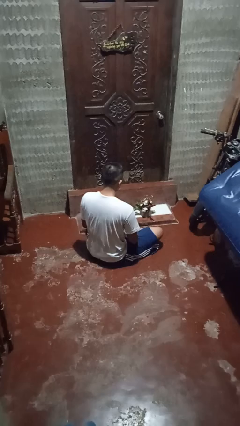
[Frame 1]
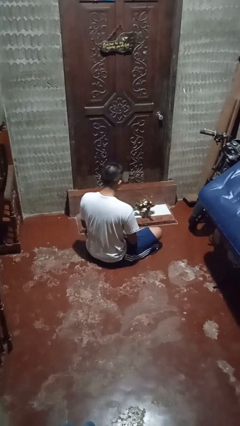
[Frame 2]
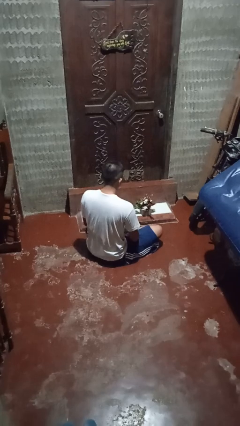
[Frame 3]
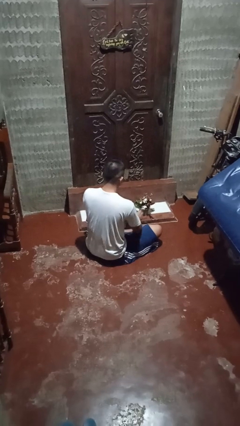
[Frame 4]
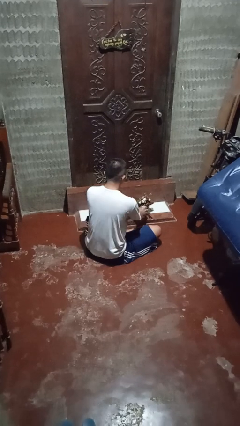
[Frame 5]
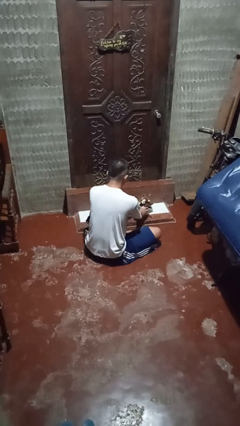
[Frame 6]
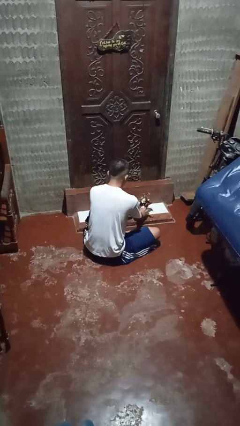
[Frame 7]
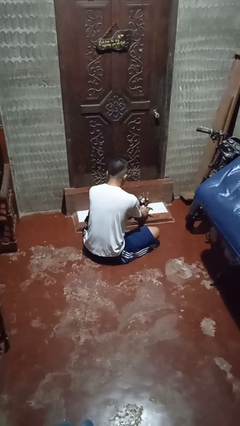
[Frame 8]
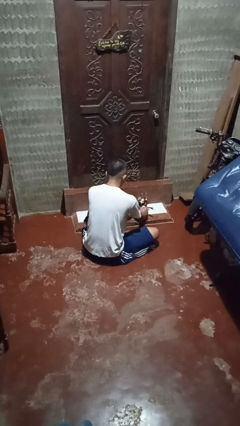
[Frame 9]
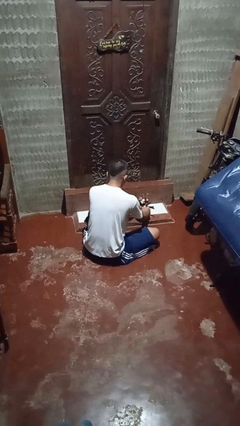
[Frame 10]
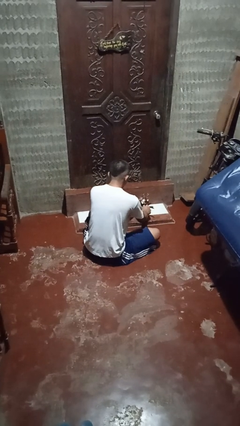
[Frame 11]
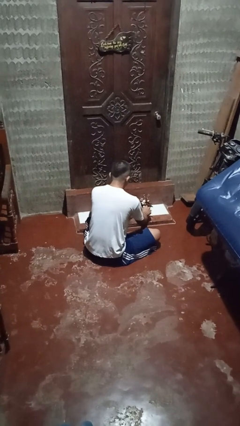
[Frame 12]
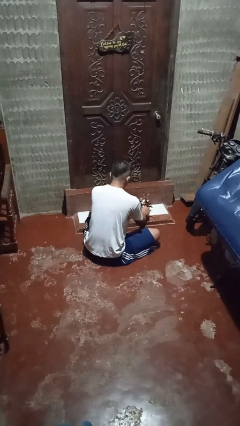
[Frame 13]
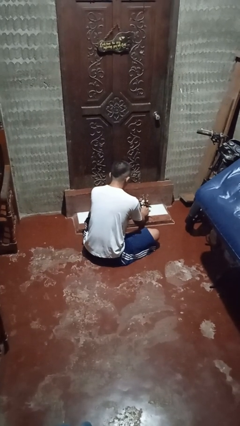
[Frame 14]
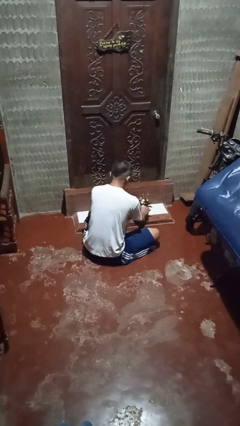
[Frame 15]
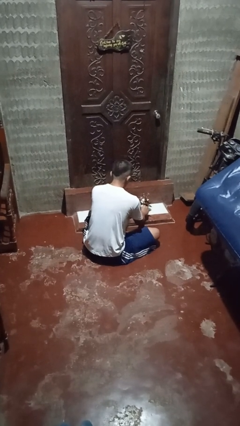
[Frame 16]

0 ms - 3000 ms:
person arranges flowers in vase

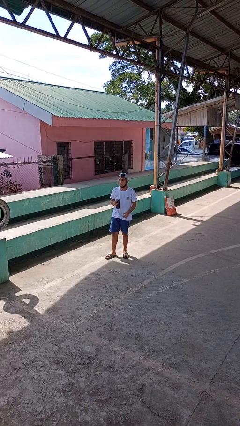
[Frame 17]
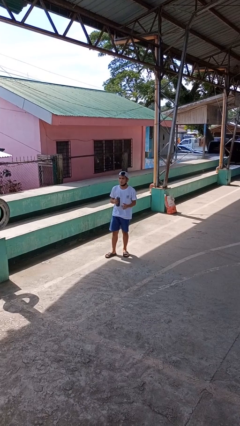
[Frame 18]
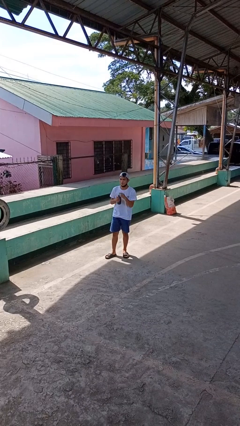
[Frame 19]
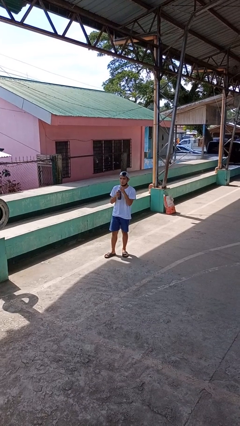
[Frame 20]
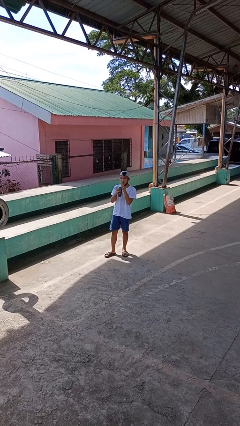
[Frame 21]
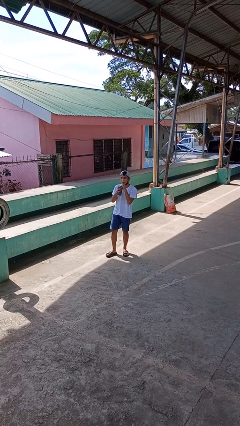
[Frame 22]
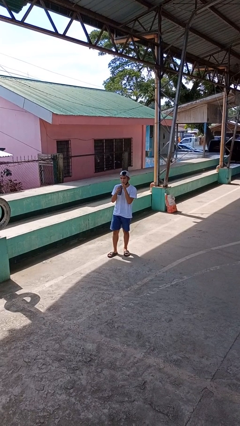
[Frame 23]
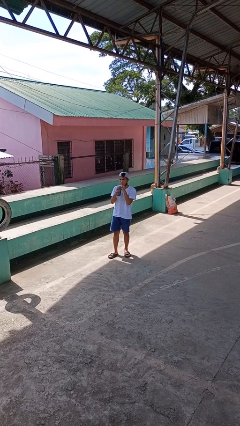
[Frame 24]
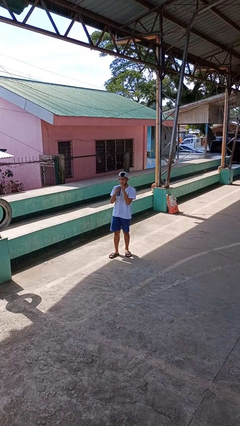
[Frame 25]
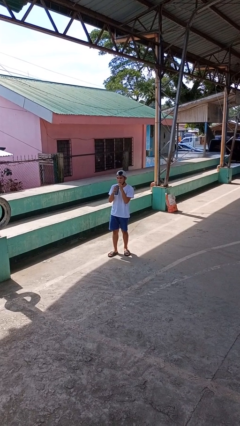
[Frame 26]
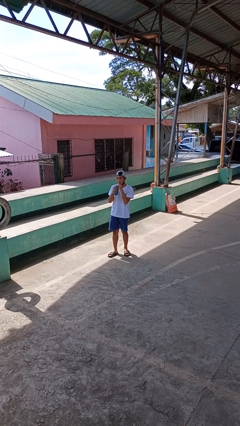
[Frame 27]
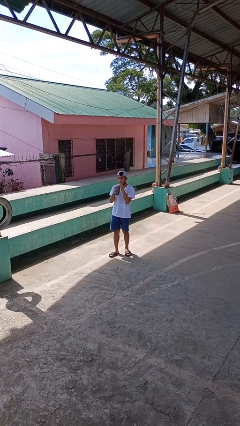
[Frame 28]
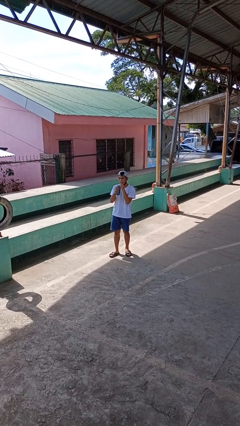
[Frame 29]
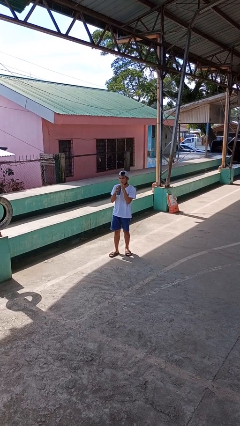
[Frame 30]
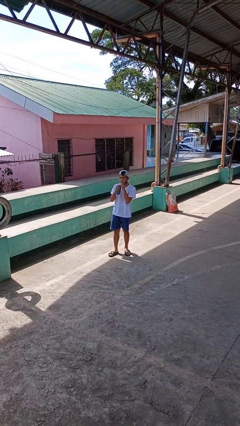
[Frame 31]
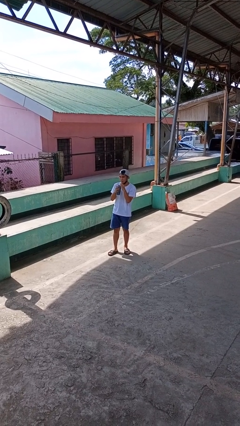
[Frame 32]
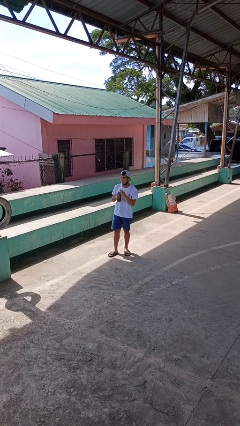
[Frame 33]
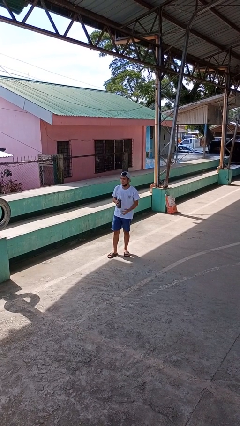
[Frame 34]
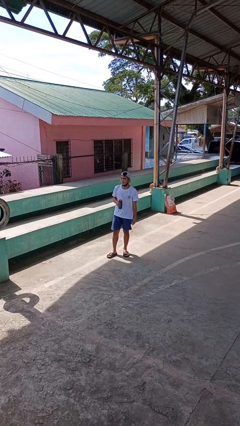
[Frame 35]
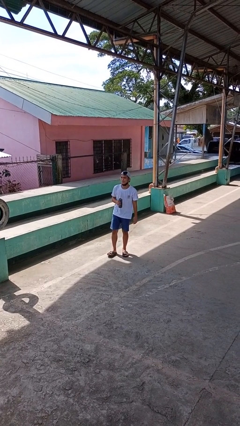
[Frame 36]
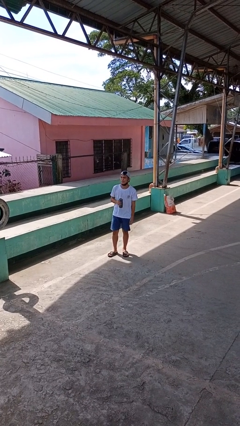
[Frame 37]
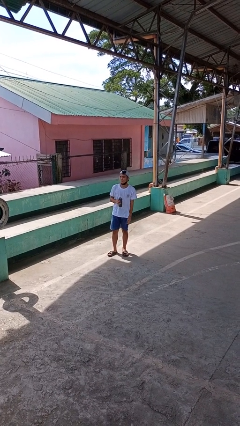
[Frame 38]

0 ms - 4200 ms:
person drinks from straw

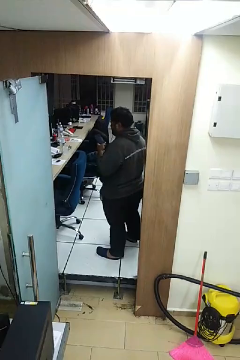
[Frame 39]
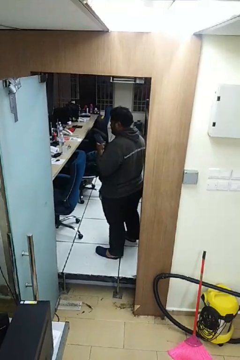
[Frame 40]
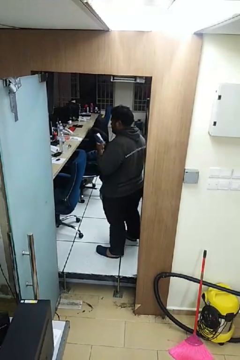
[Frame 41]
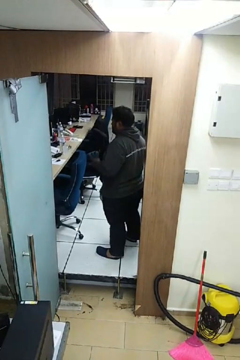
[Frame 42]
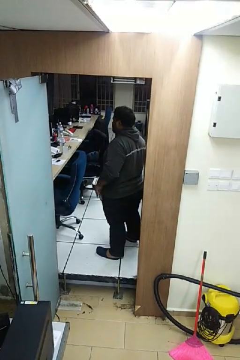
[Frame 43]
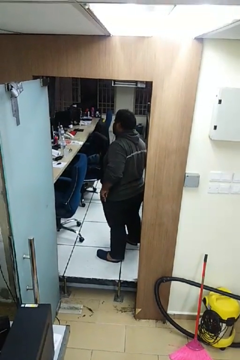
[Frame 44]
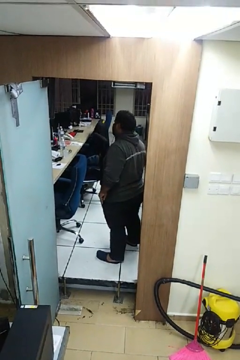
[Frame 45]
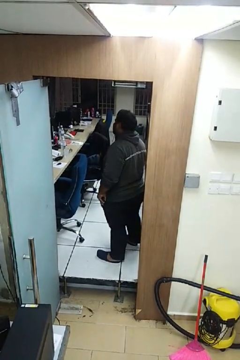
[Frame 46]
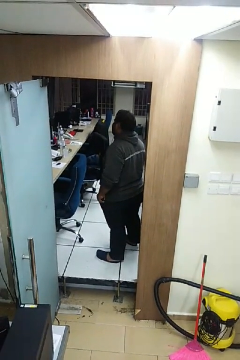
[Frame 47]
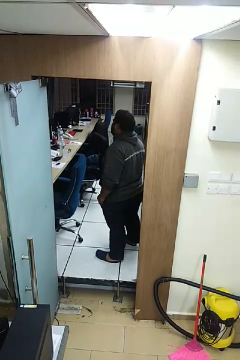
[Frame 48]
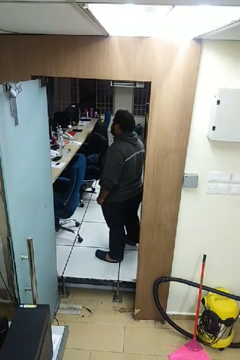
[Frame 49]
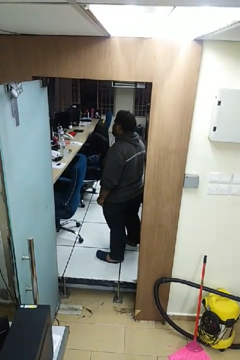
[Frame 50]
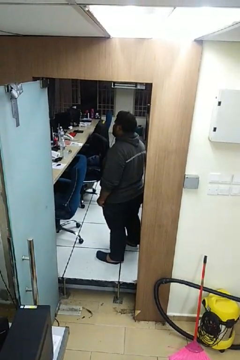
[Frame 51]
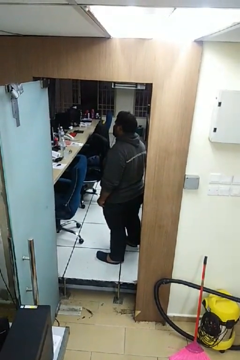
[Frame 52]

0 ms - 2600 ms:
person puts phone into pocket

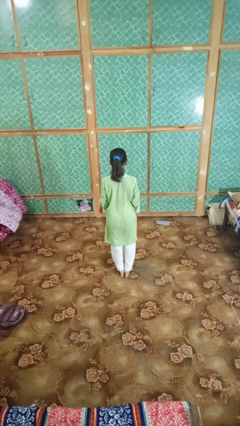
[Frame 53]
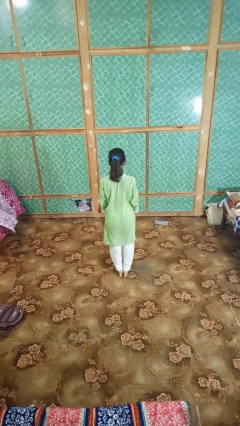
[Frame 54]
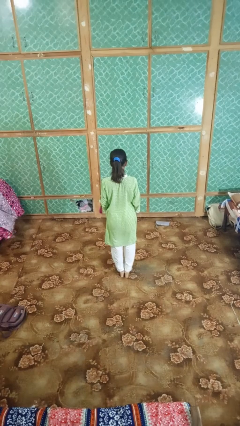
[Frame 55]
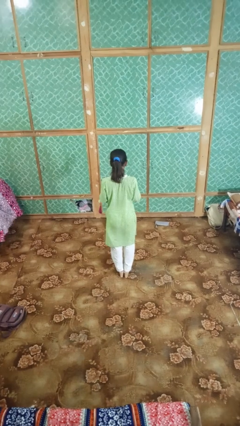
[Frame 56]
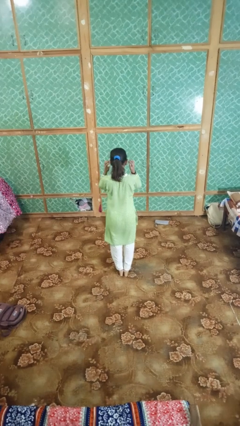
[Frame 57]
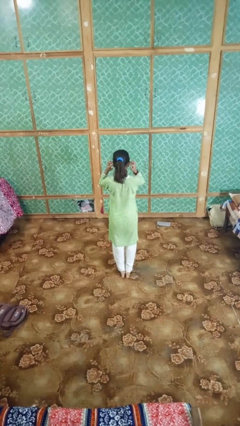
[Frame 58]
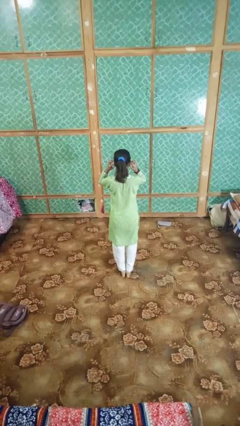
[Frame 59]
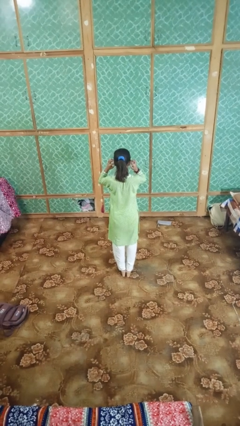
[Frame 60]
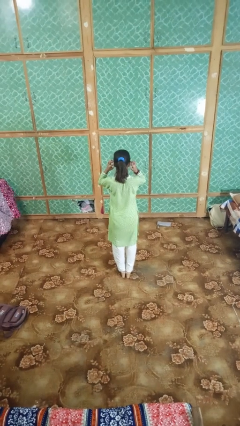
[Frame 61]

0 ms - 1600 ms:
person puts fingers in ear

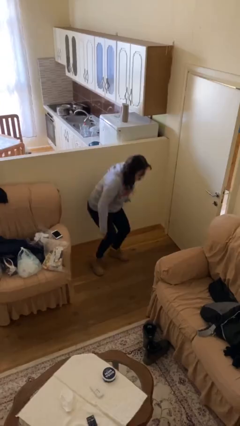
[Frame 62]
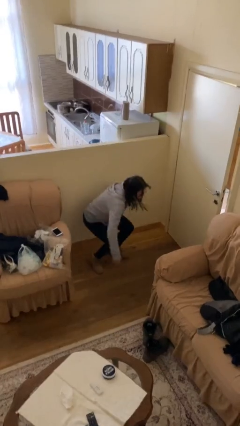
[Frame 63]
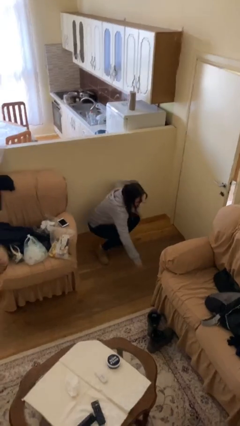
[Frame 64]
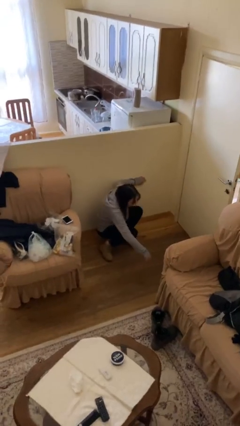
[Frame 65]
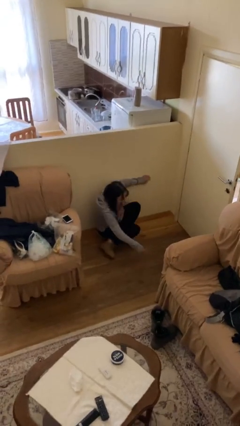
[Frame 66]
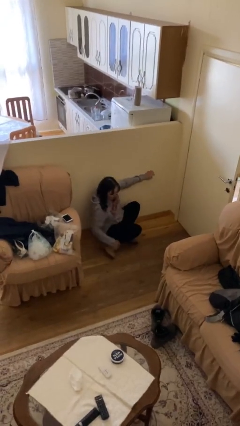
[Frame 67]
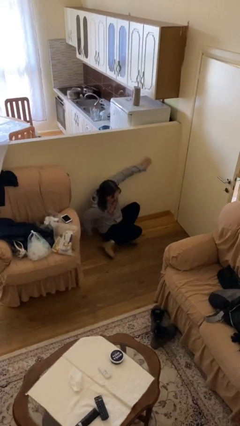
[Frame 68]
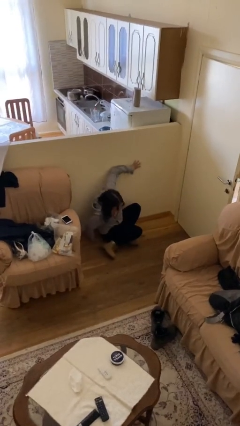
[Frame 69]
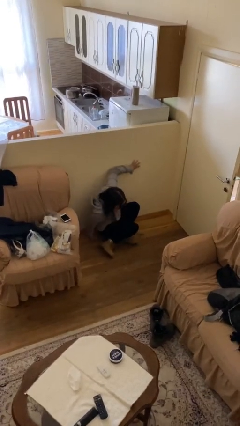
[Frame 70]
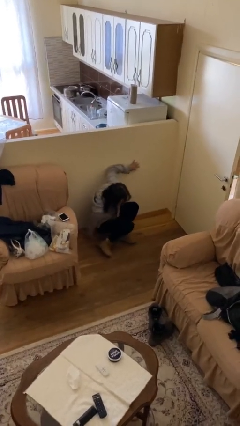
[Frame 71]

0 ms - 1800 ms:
person sits down

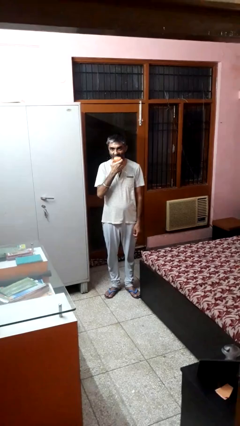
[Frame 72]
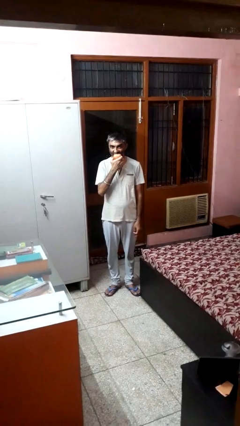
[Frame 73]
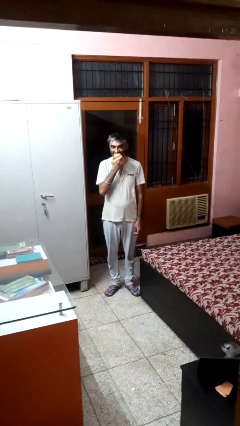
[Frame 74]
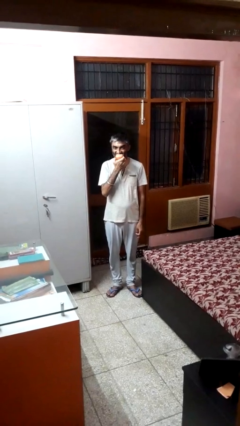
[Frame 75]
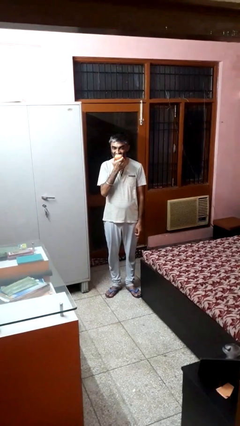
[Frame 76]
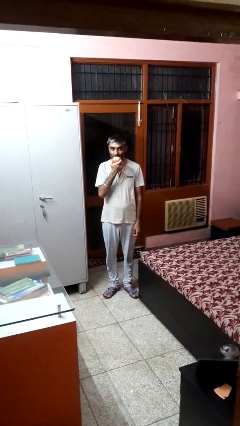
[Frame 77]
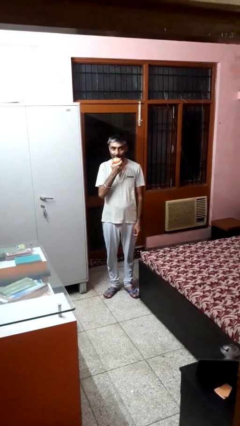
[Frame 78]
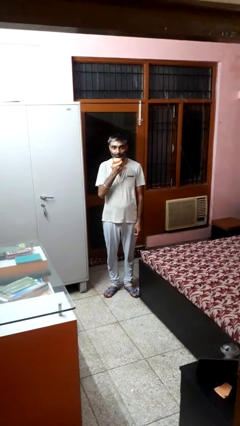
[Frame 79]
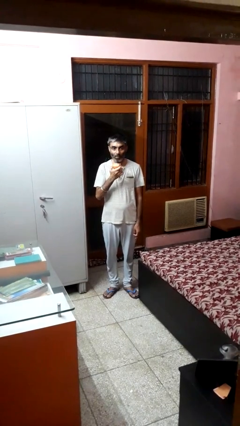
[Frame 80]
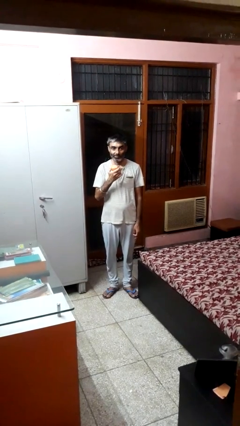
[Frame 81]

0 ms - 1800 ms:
person eats apple

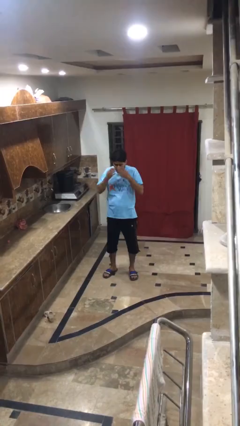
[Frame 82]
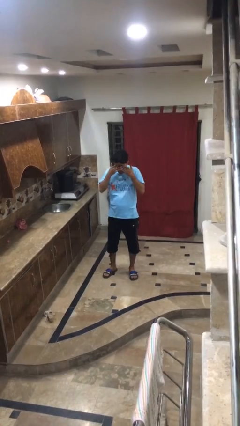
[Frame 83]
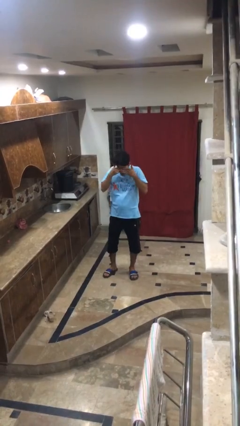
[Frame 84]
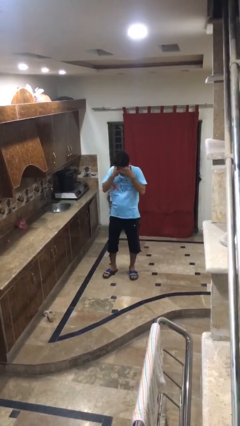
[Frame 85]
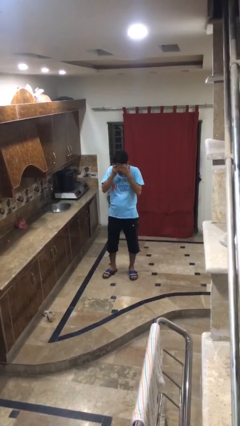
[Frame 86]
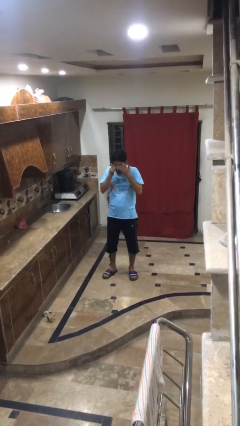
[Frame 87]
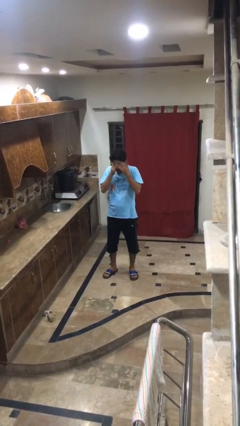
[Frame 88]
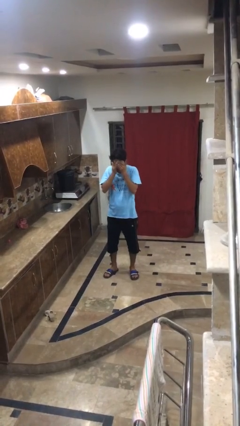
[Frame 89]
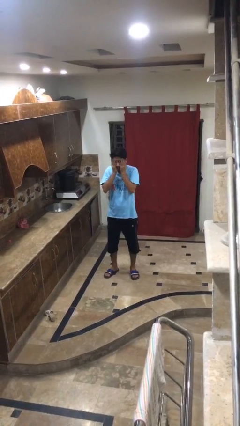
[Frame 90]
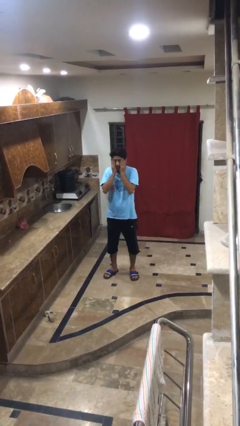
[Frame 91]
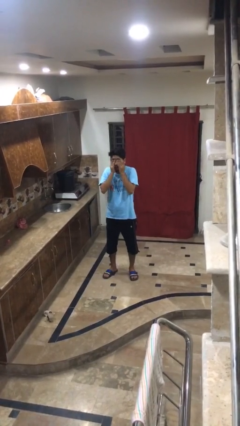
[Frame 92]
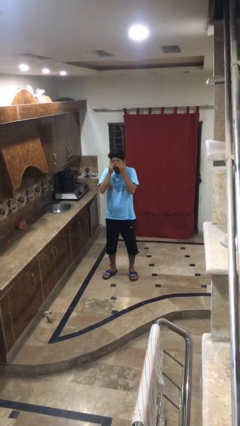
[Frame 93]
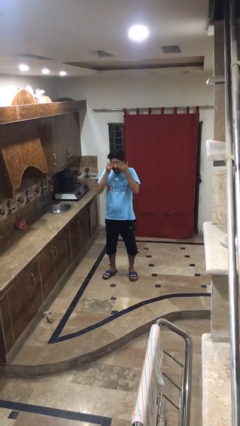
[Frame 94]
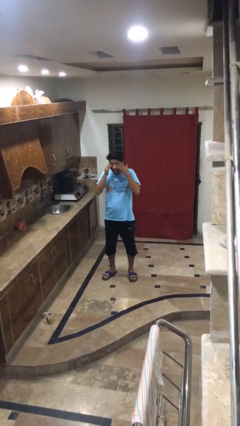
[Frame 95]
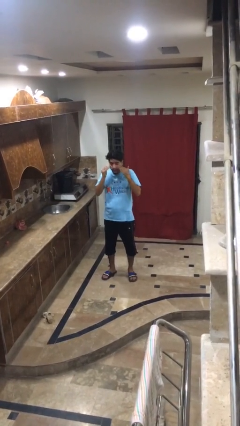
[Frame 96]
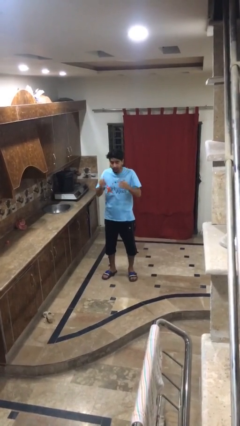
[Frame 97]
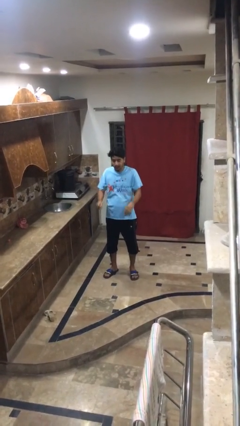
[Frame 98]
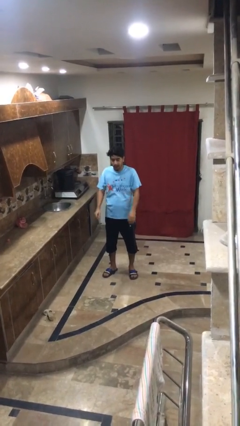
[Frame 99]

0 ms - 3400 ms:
person rubs eyes
